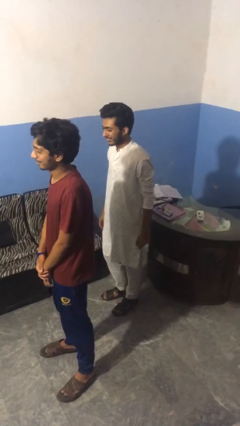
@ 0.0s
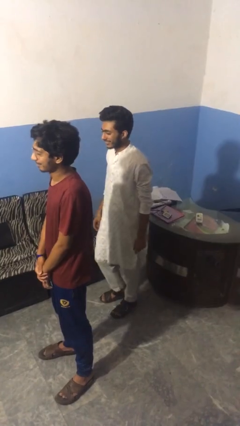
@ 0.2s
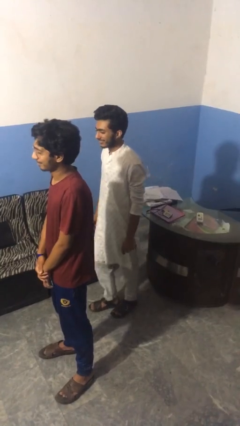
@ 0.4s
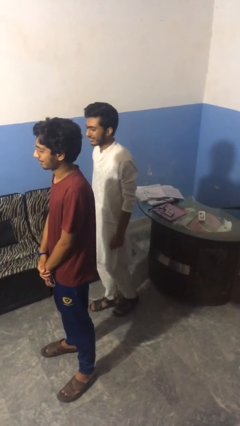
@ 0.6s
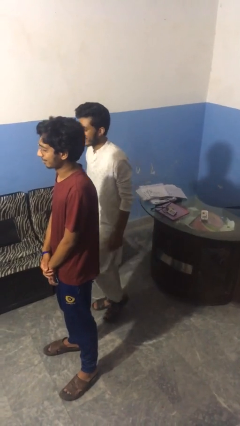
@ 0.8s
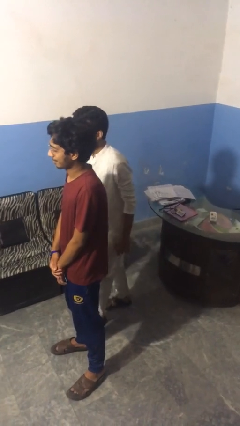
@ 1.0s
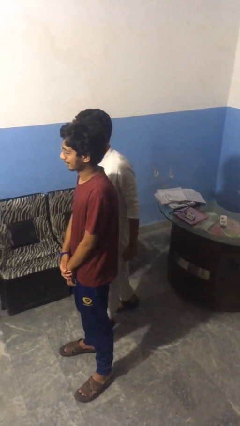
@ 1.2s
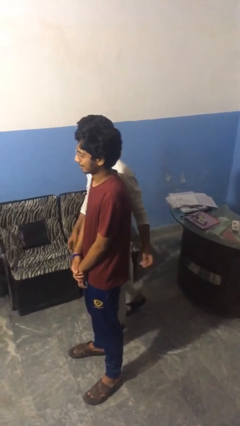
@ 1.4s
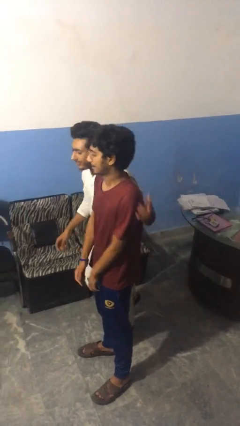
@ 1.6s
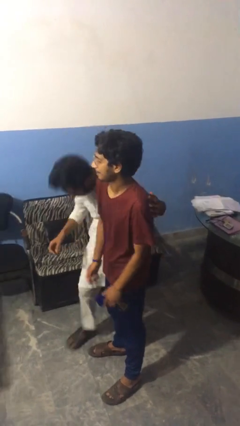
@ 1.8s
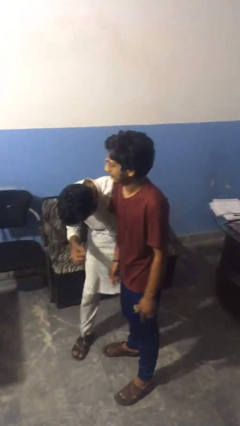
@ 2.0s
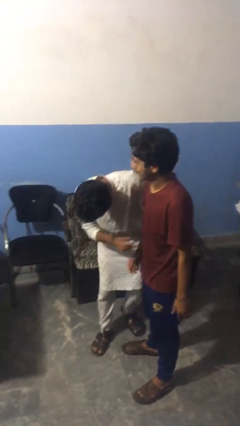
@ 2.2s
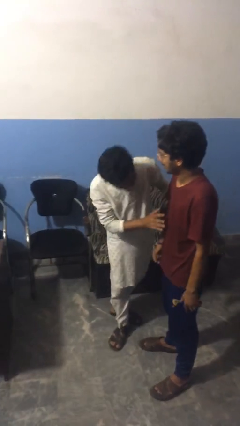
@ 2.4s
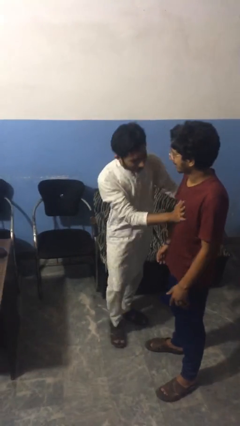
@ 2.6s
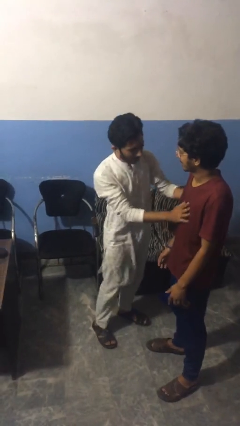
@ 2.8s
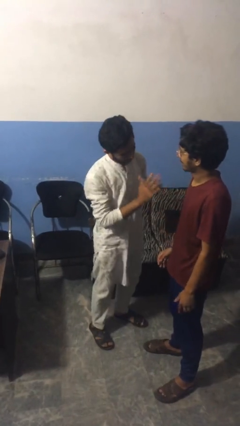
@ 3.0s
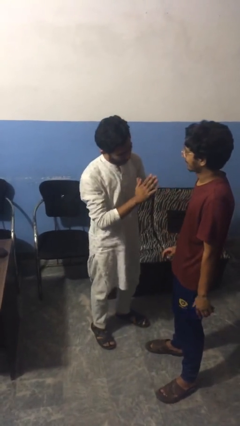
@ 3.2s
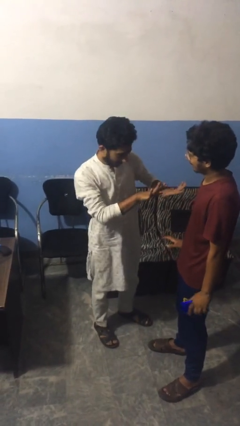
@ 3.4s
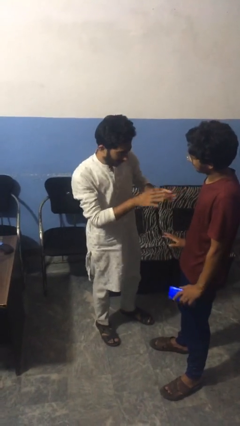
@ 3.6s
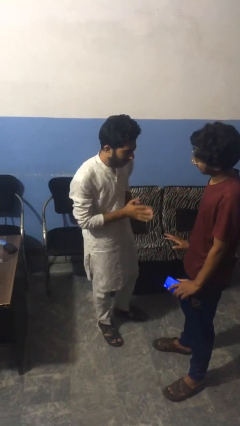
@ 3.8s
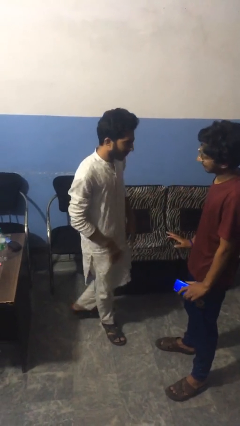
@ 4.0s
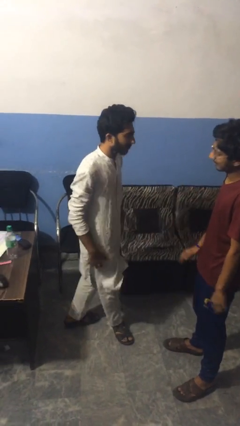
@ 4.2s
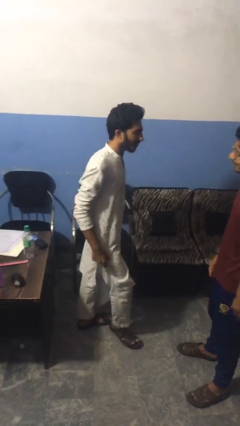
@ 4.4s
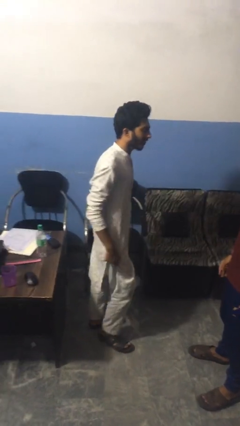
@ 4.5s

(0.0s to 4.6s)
person bumps into person

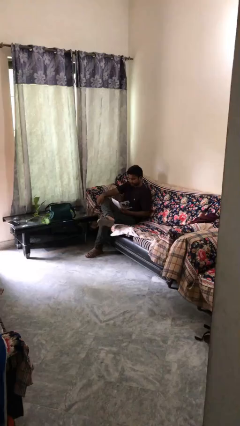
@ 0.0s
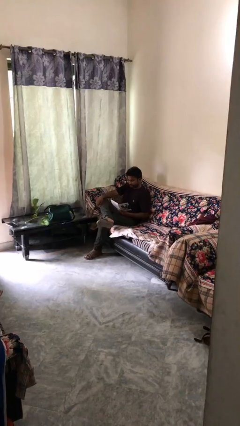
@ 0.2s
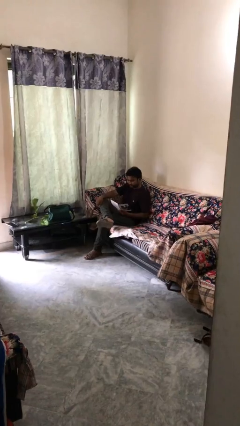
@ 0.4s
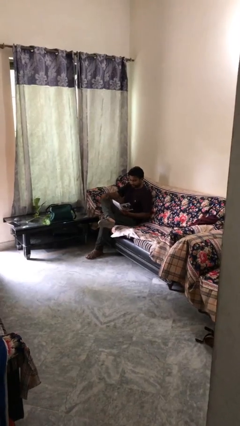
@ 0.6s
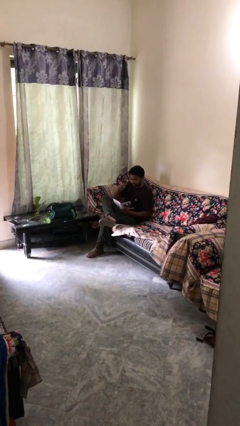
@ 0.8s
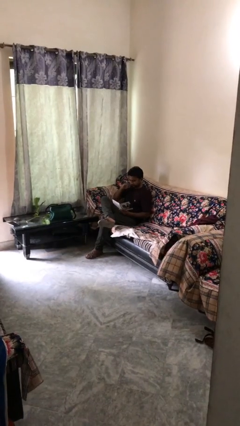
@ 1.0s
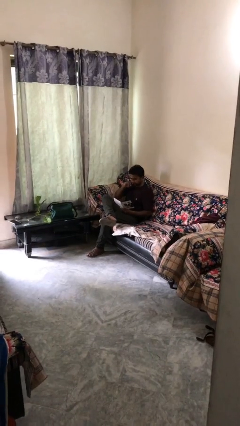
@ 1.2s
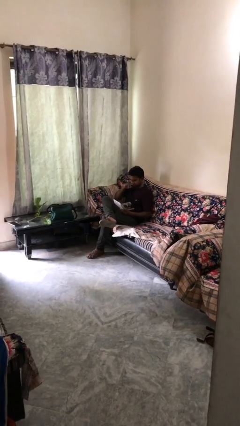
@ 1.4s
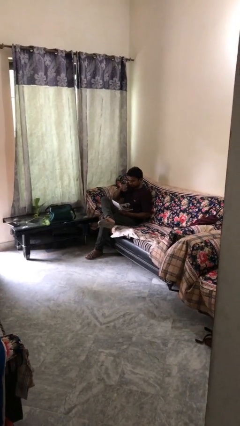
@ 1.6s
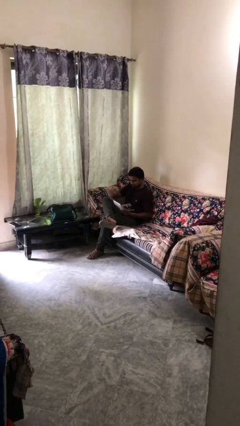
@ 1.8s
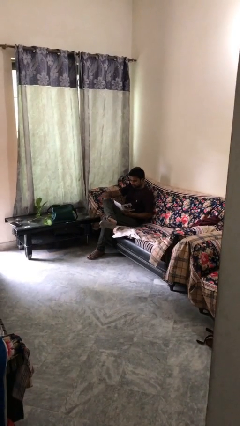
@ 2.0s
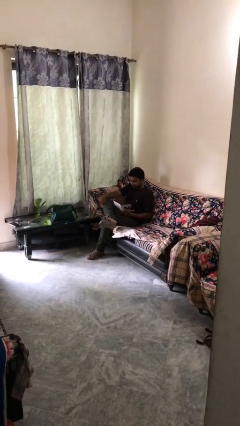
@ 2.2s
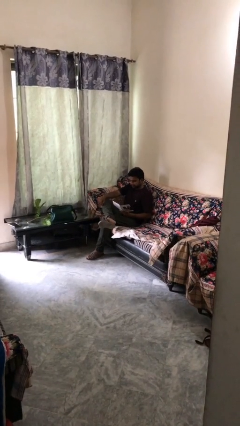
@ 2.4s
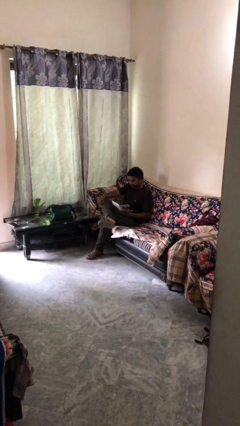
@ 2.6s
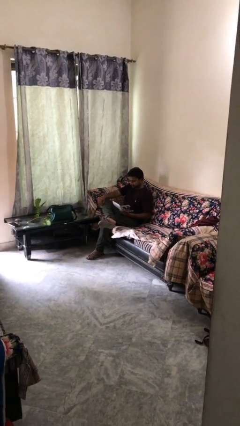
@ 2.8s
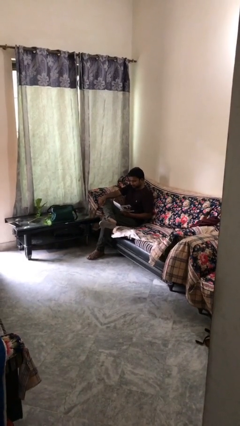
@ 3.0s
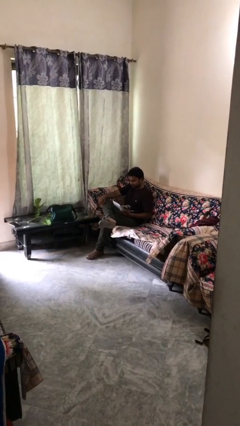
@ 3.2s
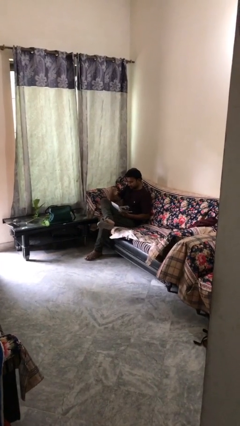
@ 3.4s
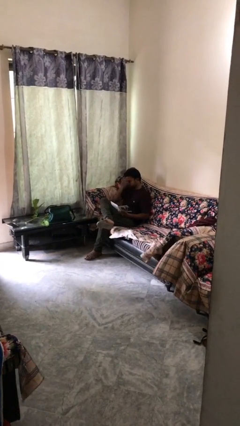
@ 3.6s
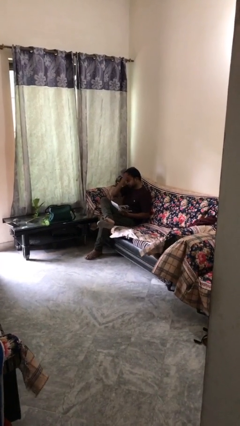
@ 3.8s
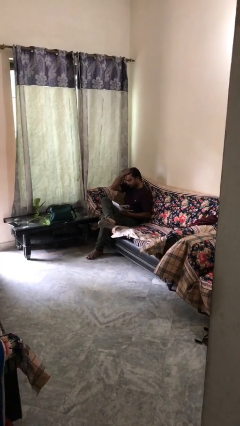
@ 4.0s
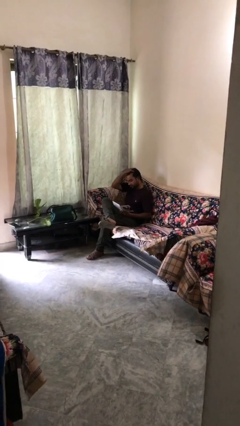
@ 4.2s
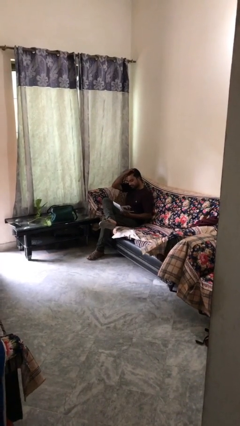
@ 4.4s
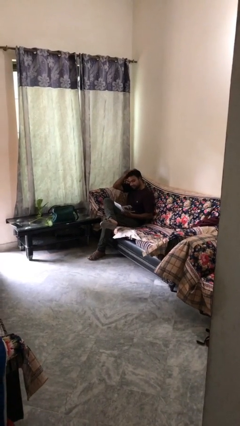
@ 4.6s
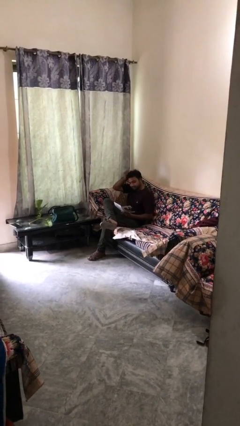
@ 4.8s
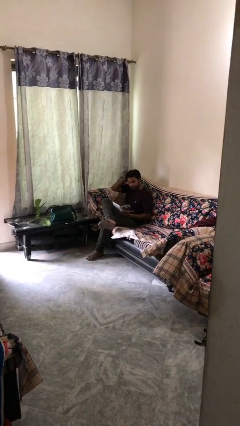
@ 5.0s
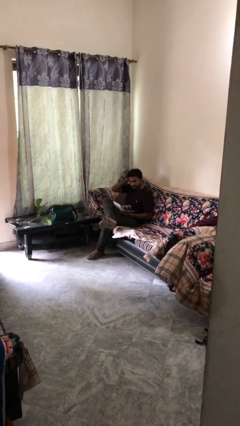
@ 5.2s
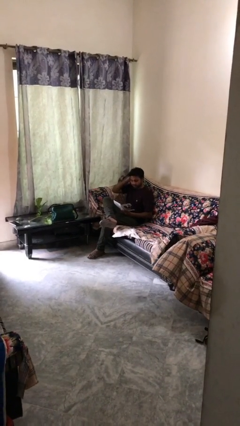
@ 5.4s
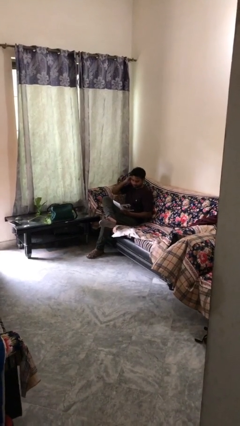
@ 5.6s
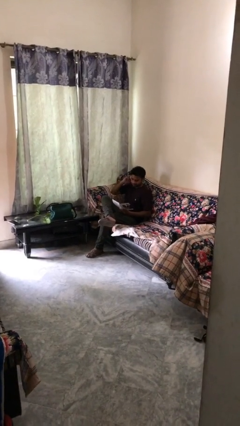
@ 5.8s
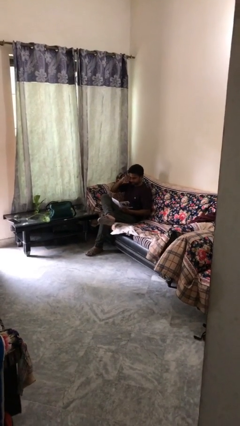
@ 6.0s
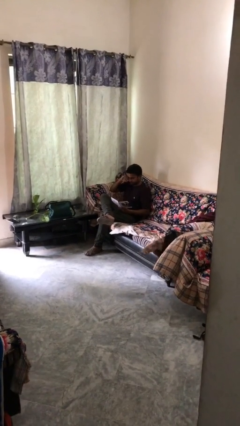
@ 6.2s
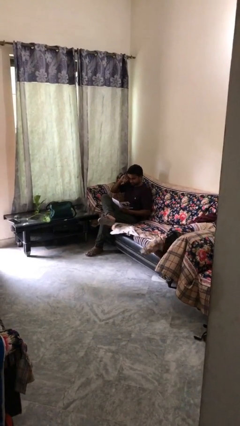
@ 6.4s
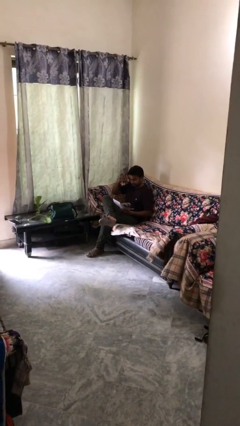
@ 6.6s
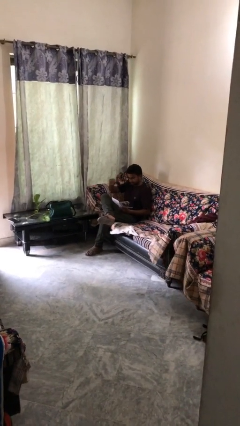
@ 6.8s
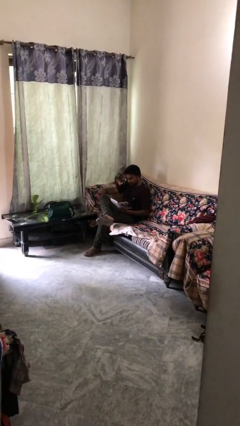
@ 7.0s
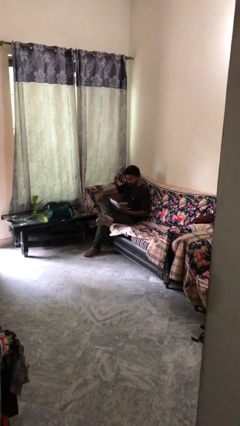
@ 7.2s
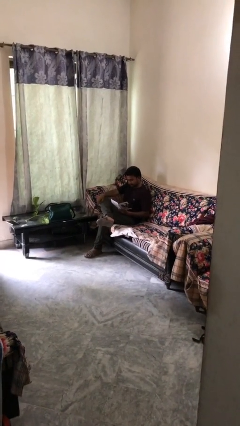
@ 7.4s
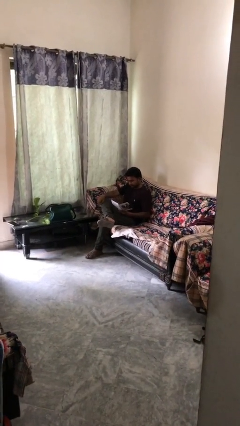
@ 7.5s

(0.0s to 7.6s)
person reads document

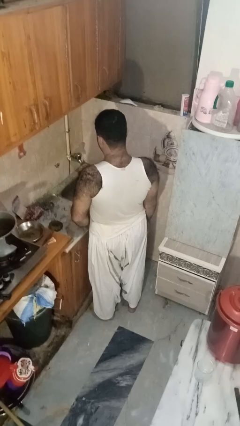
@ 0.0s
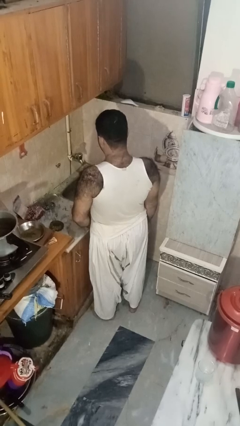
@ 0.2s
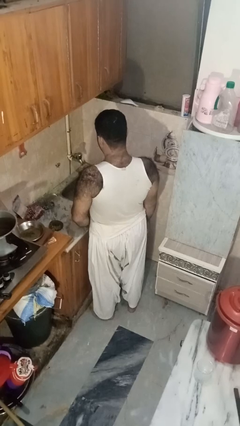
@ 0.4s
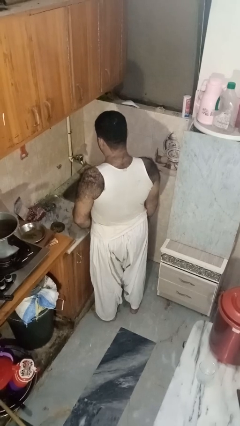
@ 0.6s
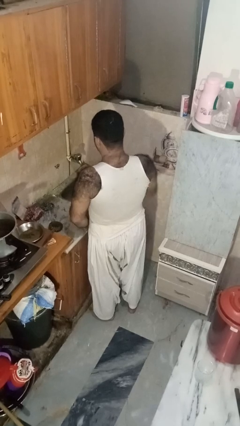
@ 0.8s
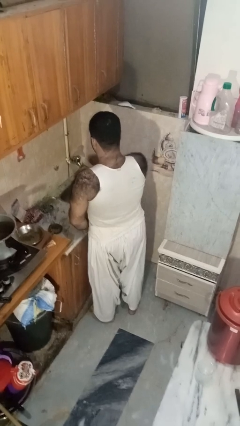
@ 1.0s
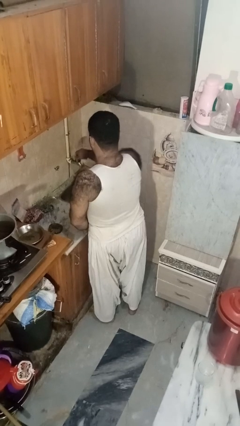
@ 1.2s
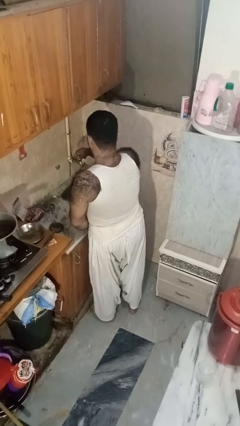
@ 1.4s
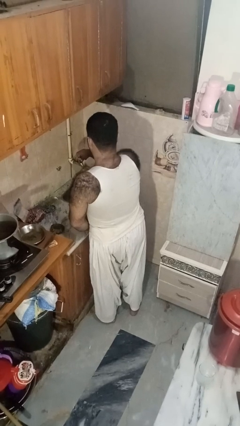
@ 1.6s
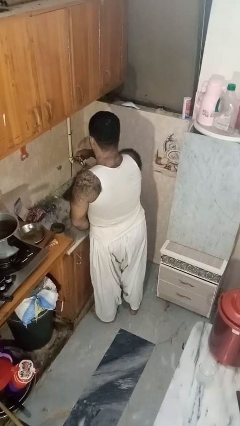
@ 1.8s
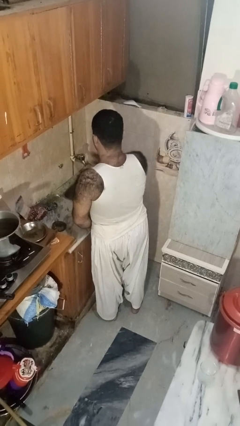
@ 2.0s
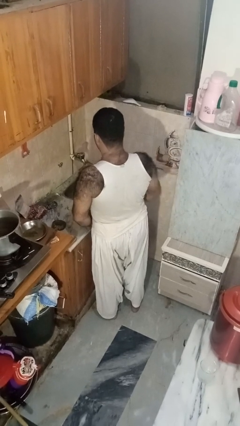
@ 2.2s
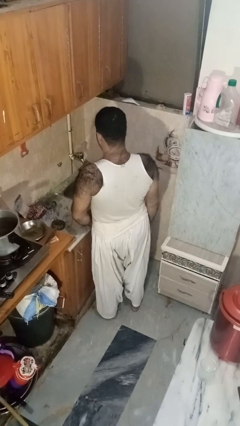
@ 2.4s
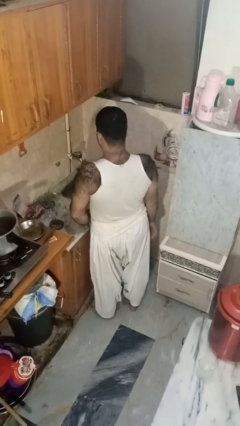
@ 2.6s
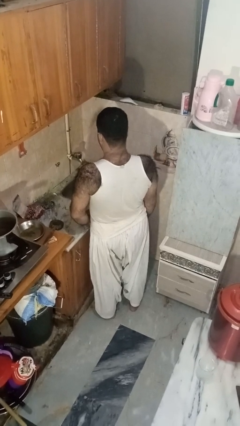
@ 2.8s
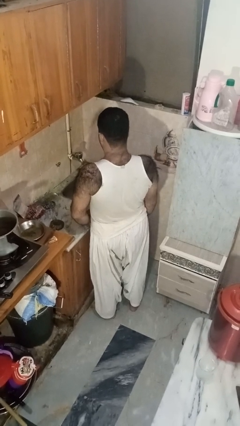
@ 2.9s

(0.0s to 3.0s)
person turns on faucet

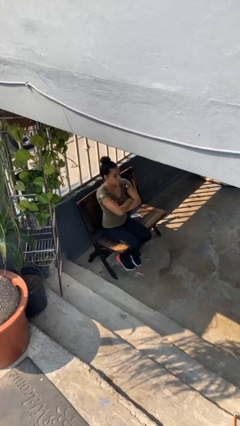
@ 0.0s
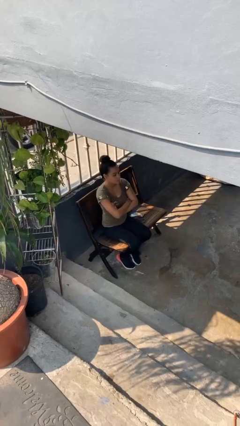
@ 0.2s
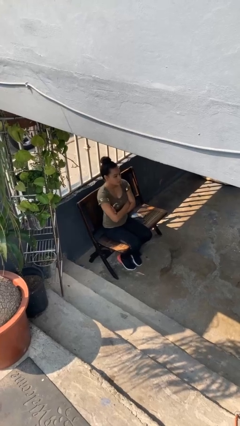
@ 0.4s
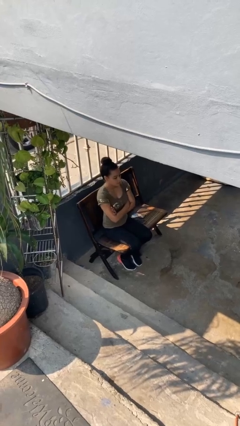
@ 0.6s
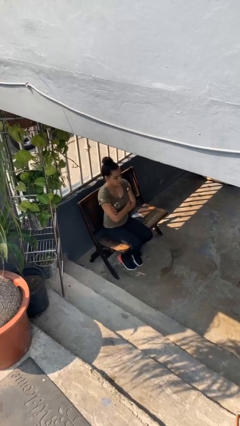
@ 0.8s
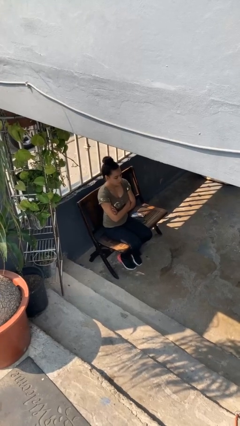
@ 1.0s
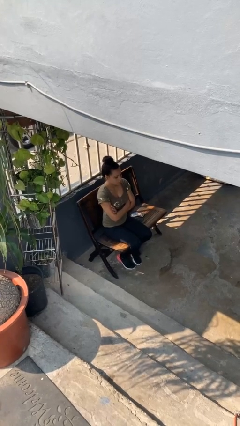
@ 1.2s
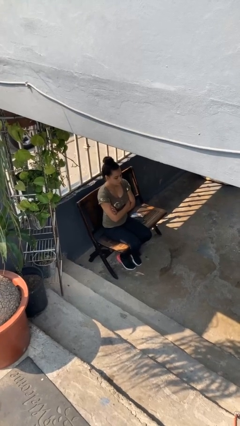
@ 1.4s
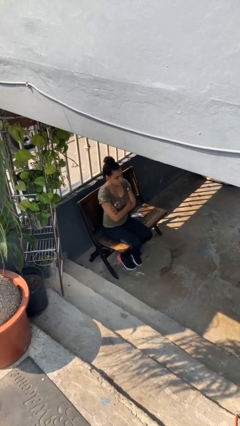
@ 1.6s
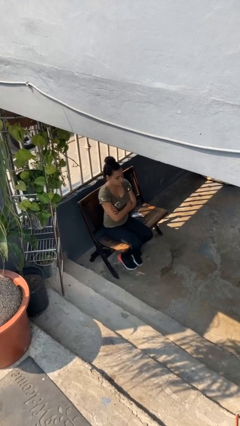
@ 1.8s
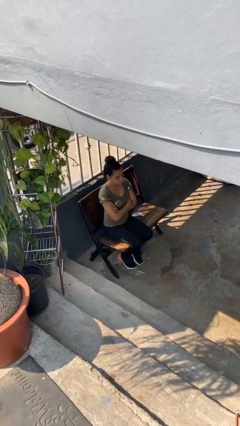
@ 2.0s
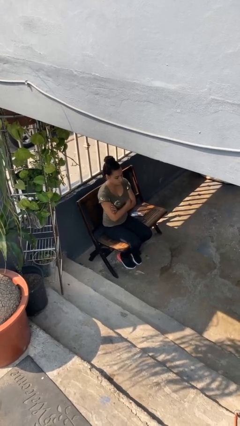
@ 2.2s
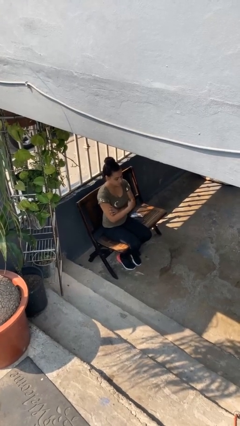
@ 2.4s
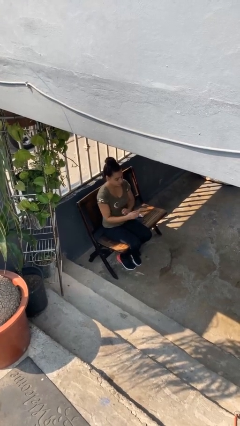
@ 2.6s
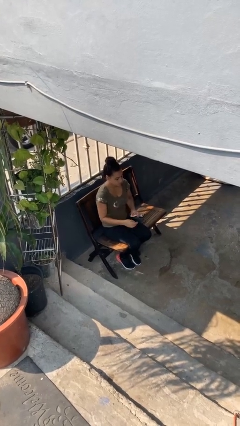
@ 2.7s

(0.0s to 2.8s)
person crosses arms
